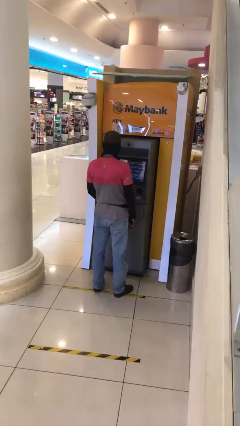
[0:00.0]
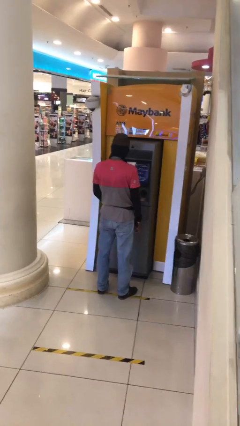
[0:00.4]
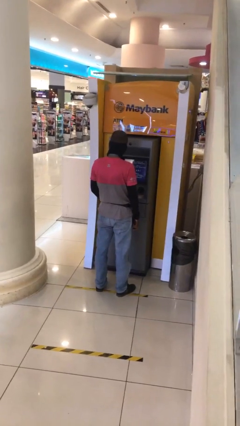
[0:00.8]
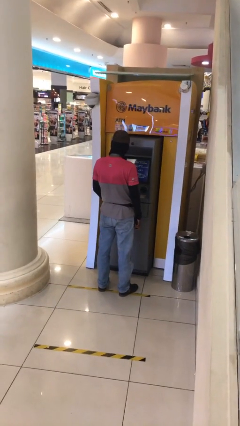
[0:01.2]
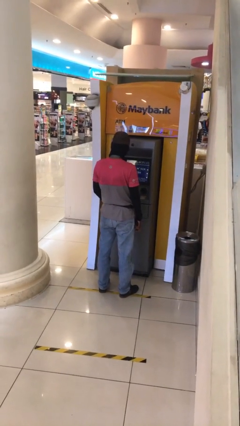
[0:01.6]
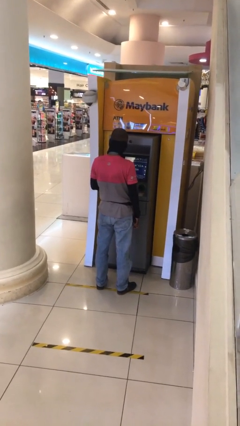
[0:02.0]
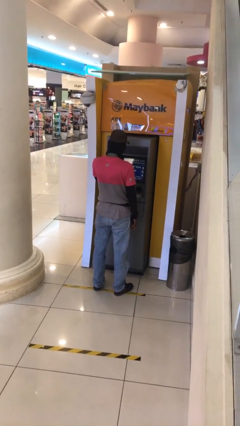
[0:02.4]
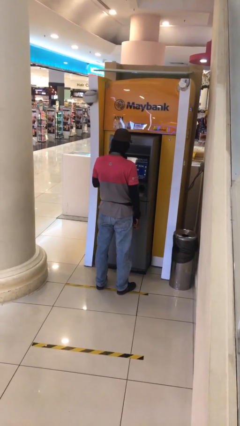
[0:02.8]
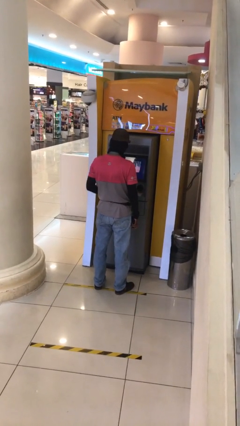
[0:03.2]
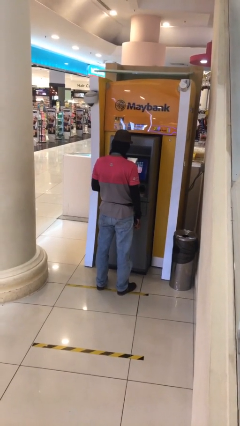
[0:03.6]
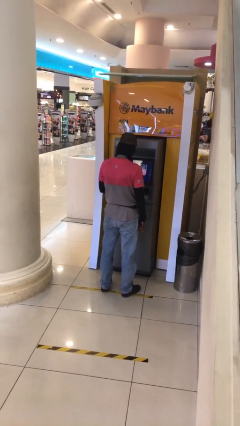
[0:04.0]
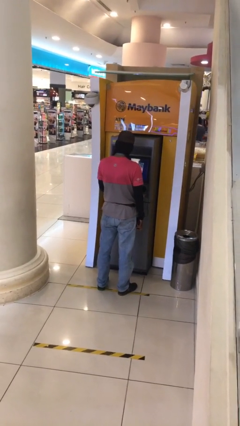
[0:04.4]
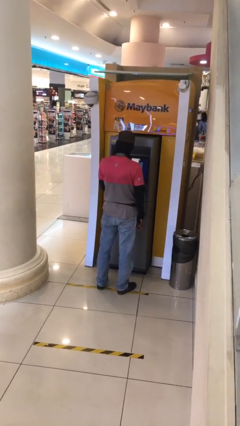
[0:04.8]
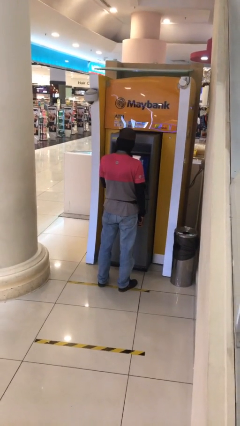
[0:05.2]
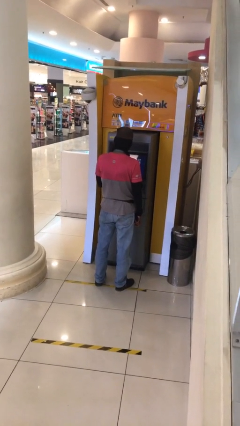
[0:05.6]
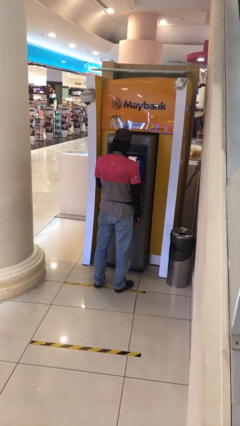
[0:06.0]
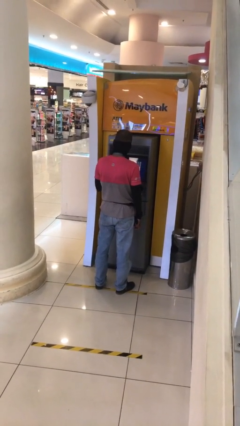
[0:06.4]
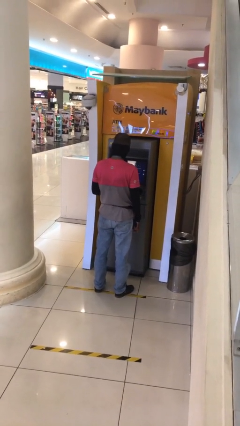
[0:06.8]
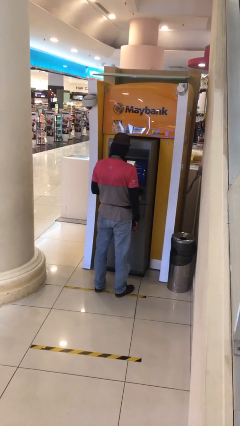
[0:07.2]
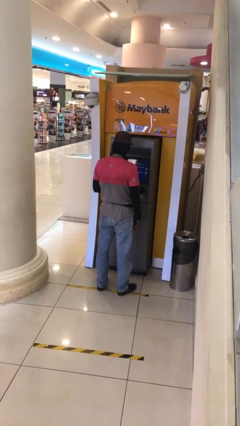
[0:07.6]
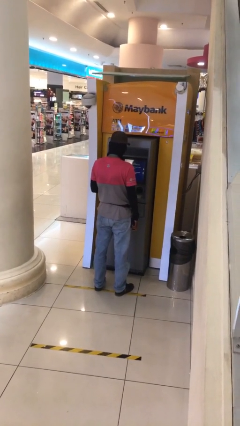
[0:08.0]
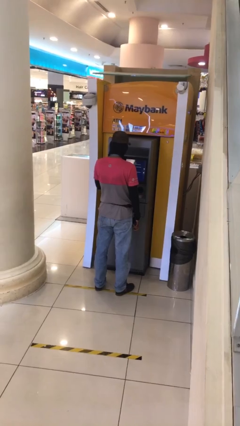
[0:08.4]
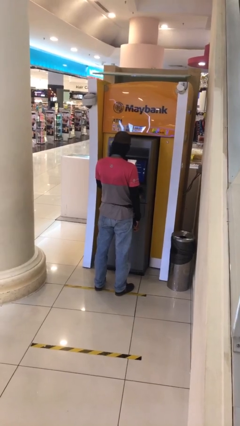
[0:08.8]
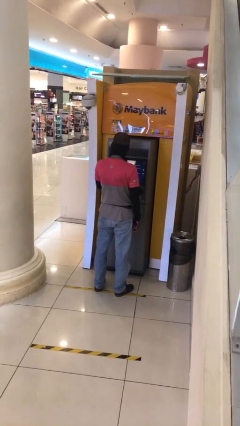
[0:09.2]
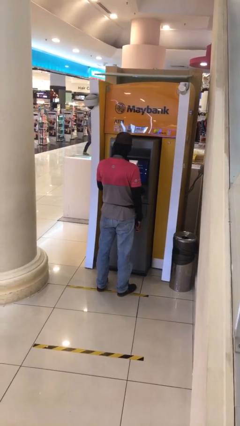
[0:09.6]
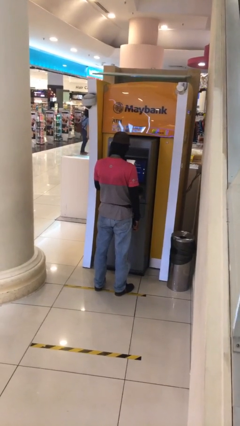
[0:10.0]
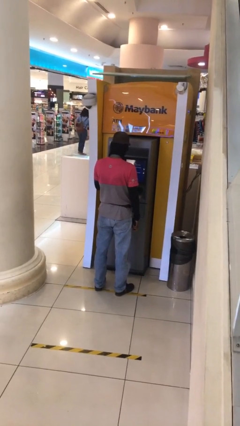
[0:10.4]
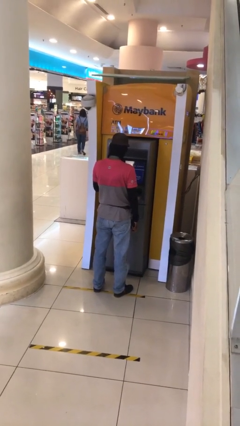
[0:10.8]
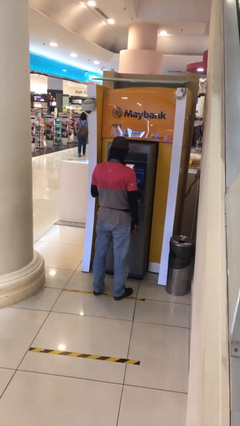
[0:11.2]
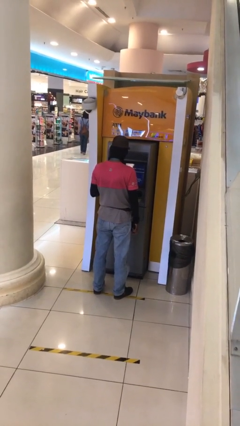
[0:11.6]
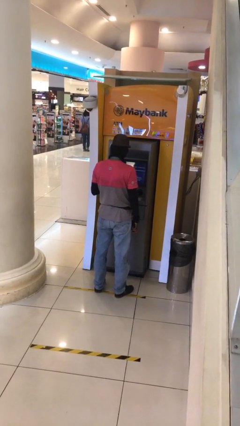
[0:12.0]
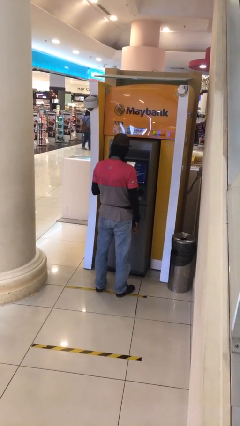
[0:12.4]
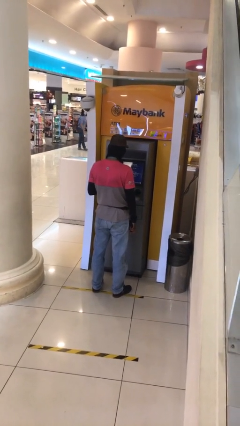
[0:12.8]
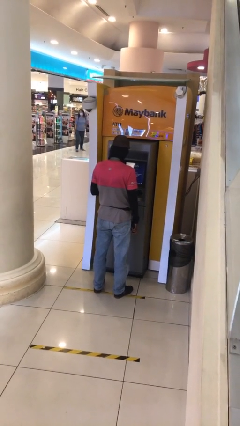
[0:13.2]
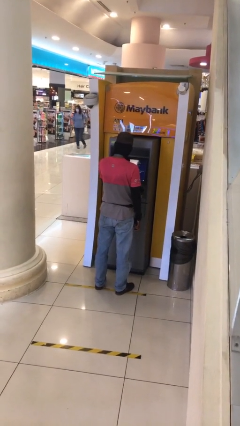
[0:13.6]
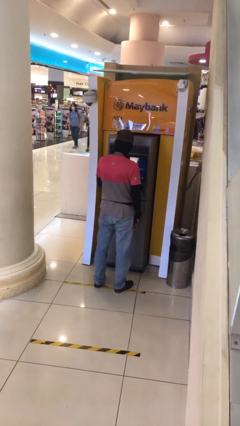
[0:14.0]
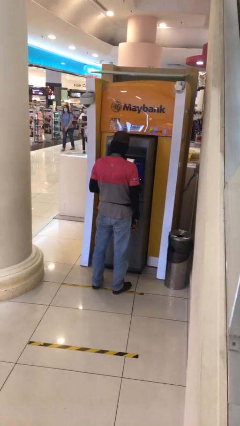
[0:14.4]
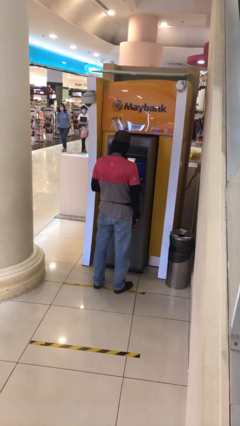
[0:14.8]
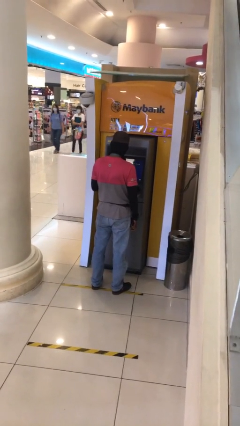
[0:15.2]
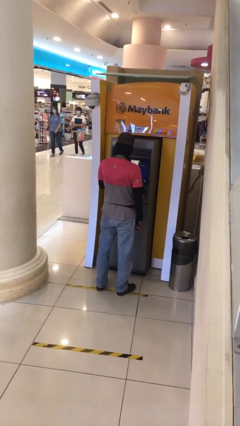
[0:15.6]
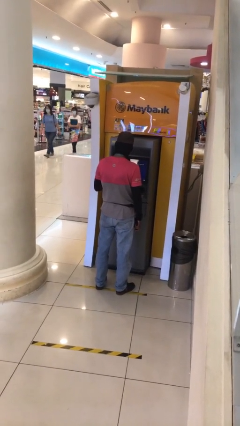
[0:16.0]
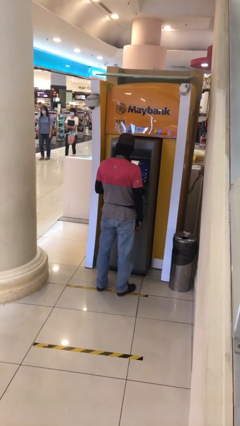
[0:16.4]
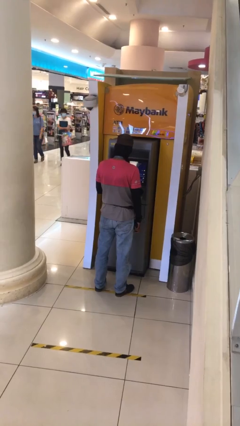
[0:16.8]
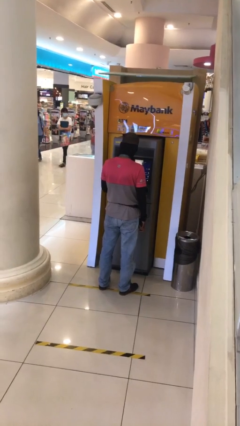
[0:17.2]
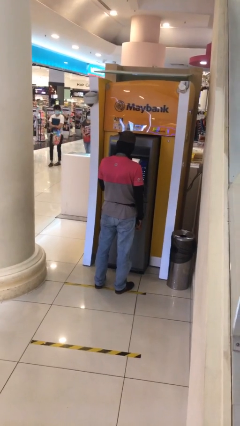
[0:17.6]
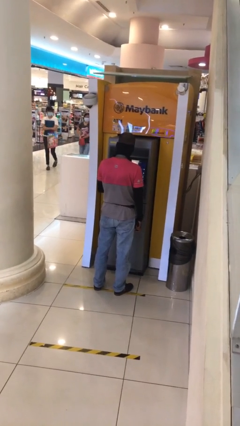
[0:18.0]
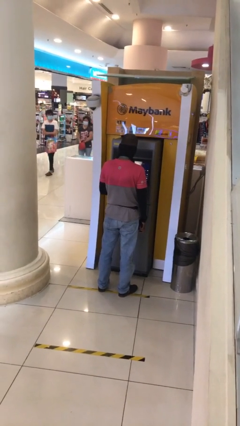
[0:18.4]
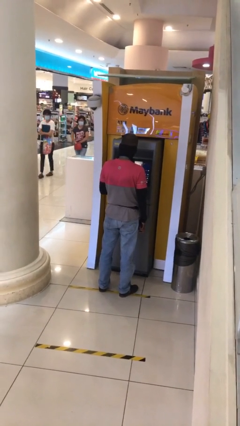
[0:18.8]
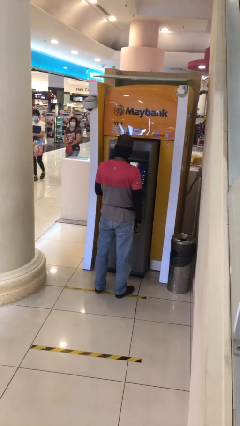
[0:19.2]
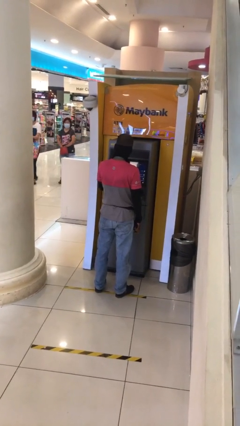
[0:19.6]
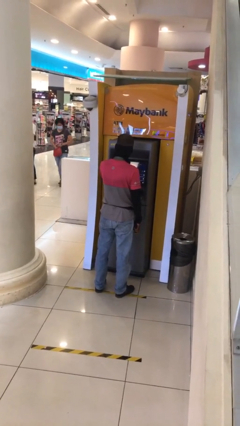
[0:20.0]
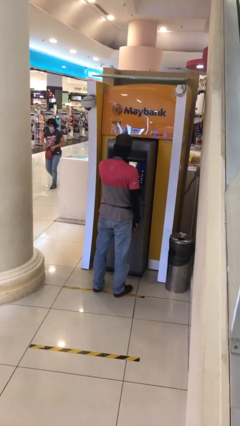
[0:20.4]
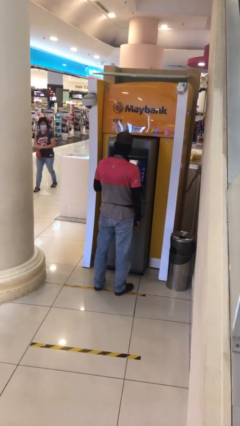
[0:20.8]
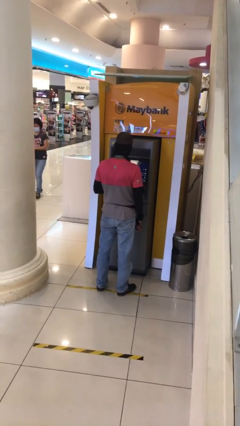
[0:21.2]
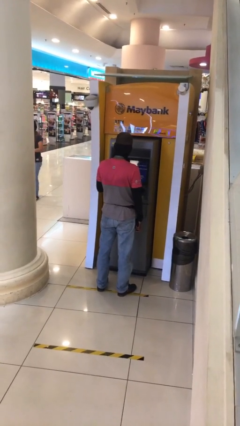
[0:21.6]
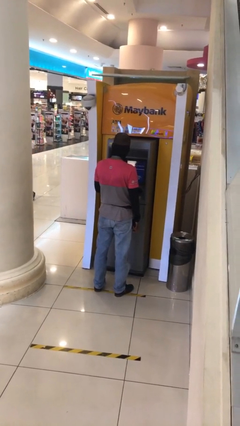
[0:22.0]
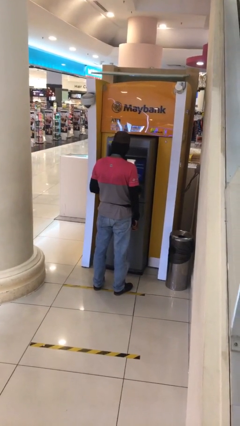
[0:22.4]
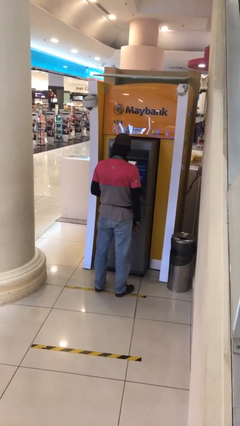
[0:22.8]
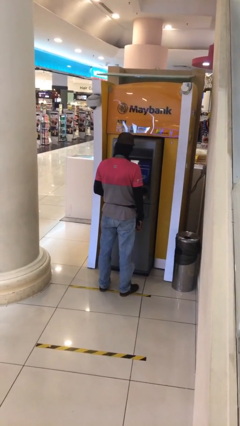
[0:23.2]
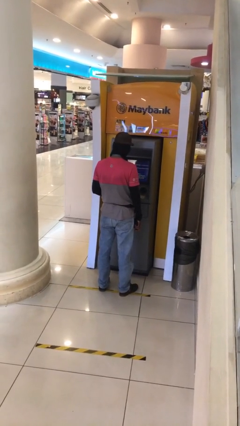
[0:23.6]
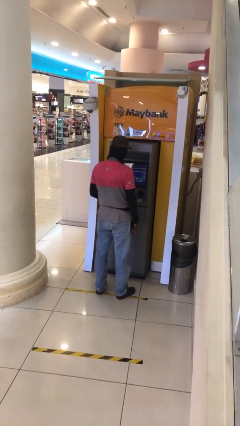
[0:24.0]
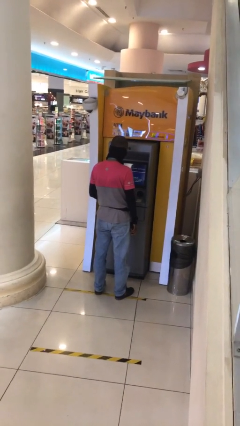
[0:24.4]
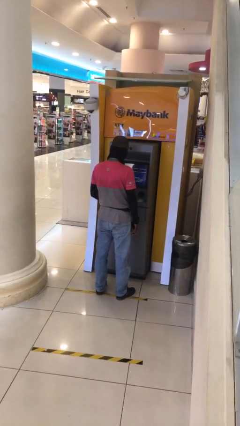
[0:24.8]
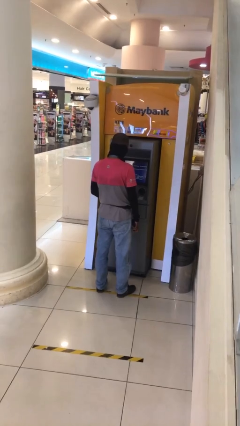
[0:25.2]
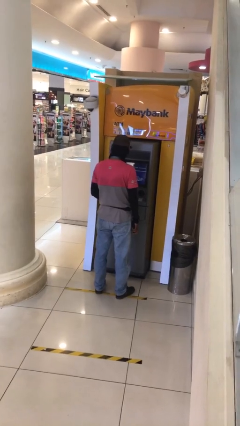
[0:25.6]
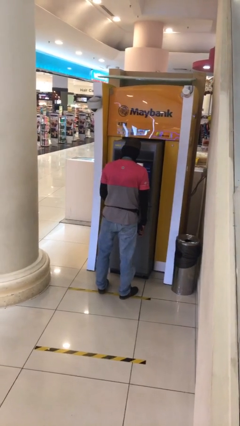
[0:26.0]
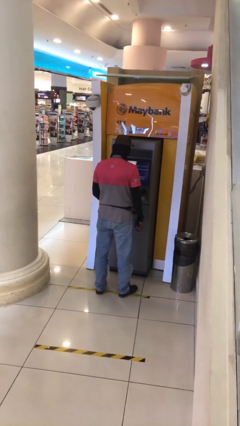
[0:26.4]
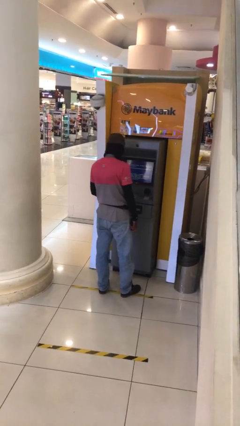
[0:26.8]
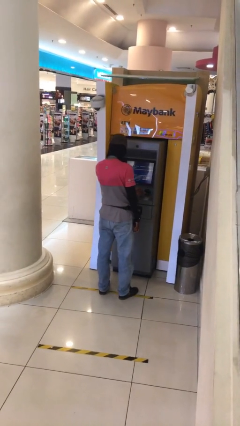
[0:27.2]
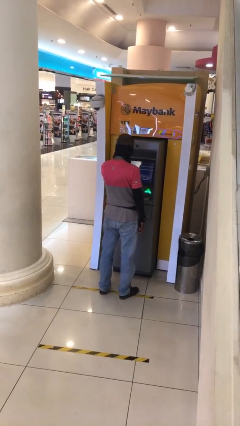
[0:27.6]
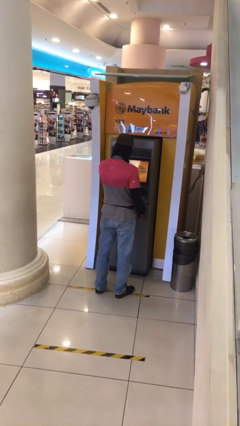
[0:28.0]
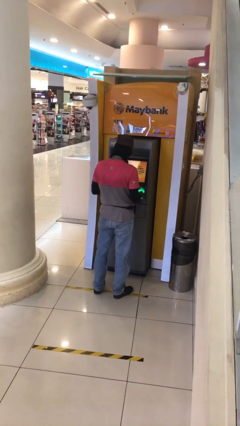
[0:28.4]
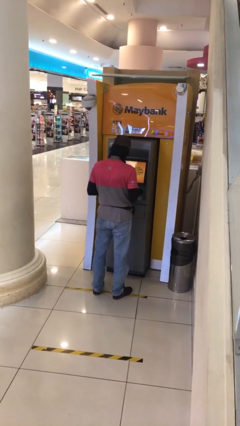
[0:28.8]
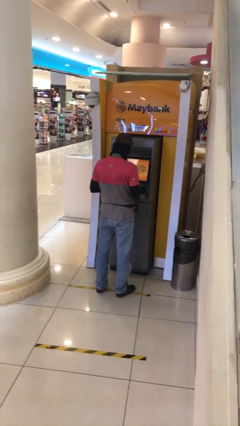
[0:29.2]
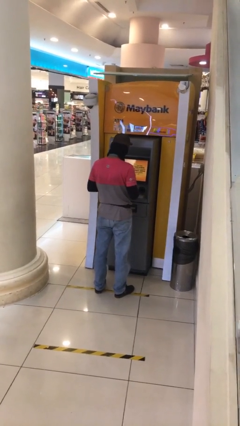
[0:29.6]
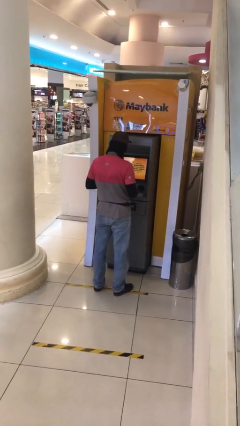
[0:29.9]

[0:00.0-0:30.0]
person purchases from machine

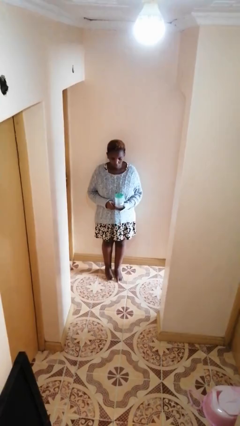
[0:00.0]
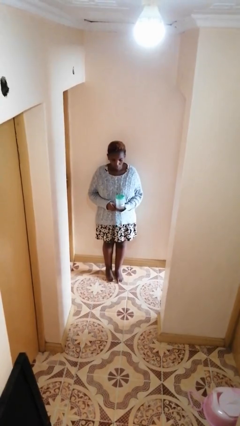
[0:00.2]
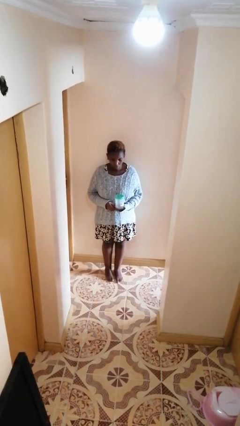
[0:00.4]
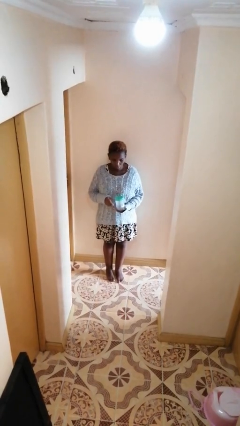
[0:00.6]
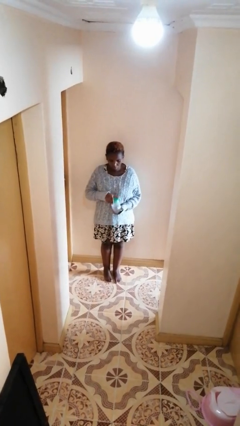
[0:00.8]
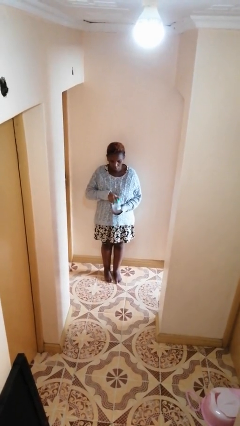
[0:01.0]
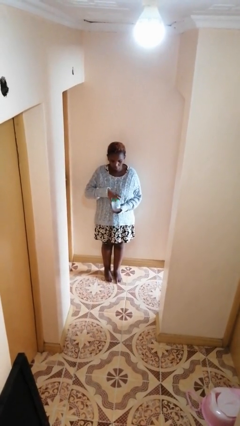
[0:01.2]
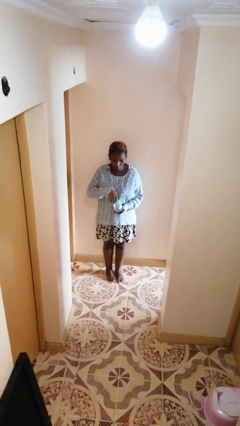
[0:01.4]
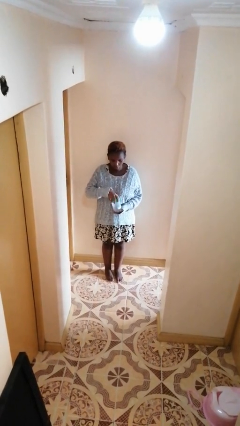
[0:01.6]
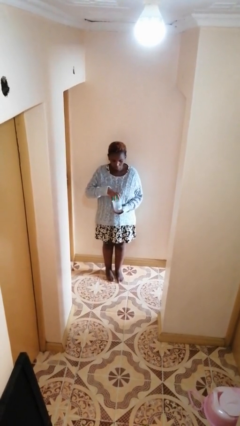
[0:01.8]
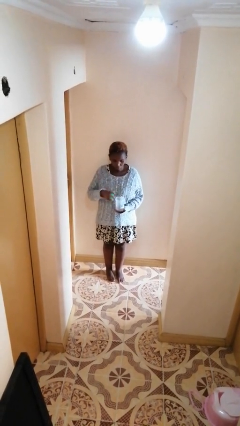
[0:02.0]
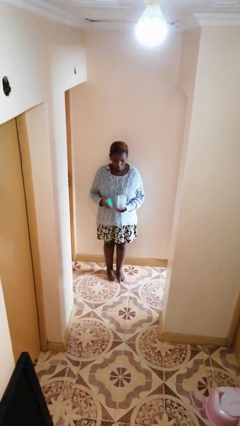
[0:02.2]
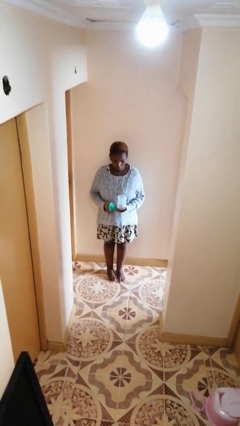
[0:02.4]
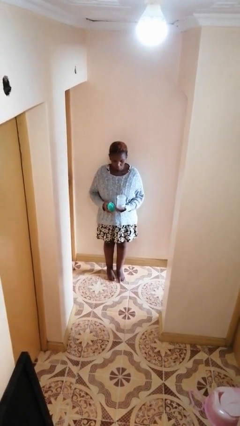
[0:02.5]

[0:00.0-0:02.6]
person opens jar

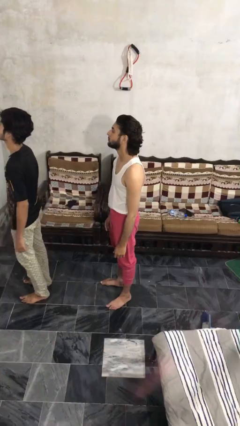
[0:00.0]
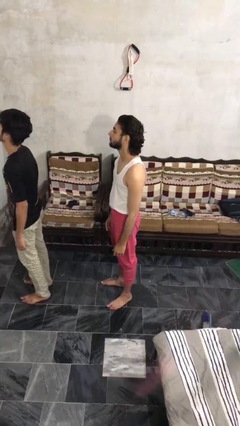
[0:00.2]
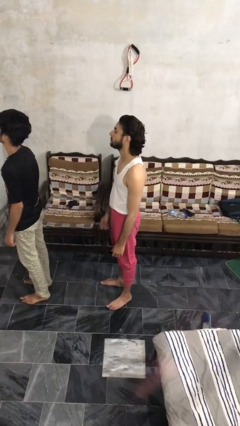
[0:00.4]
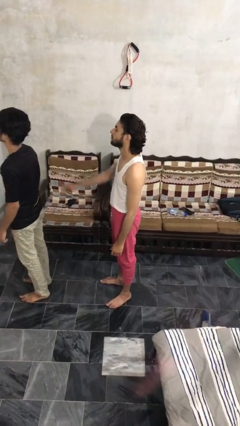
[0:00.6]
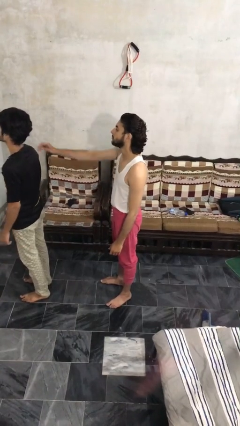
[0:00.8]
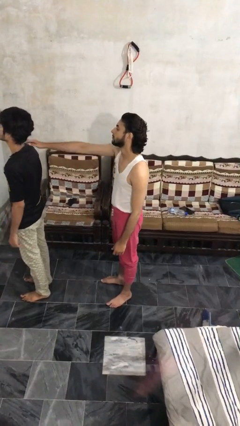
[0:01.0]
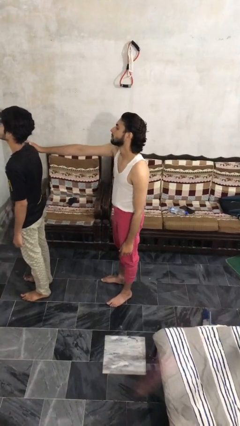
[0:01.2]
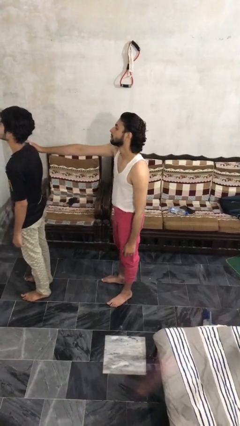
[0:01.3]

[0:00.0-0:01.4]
person grabs person by shoulder
